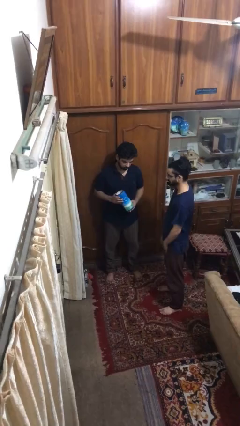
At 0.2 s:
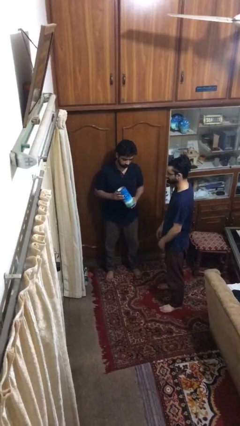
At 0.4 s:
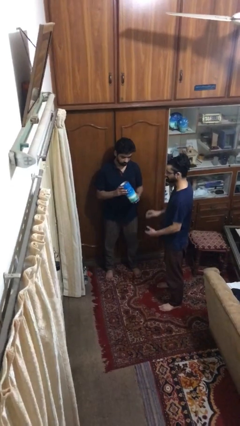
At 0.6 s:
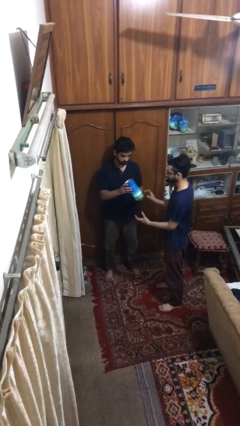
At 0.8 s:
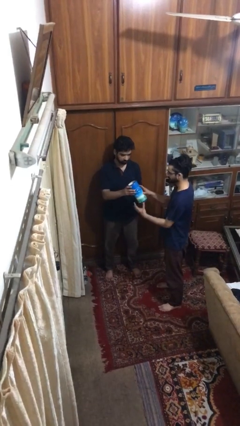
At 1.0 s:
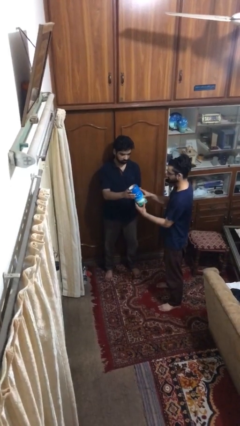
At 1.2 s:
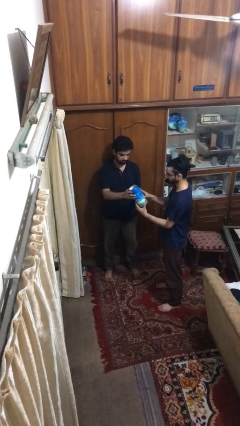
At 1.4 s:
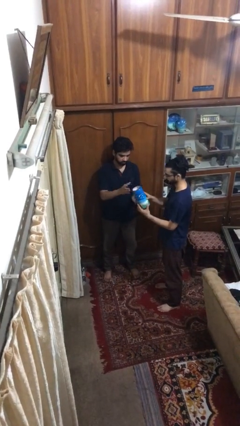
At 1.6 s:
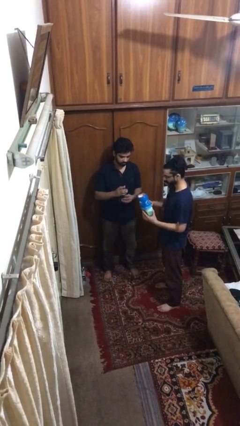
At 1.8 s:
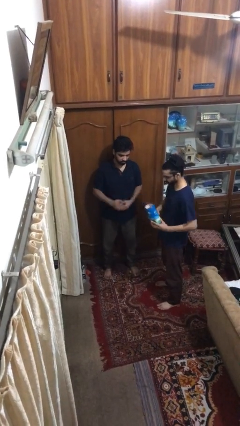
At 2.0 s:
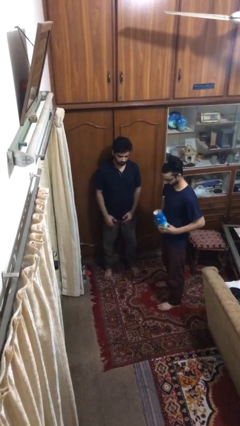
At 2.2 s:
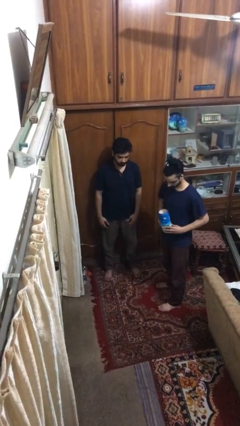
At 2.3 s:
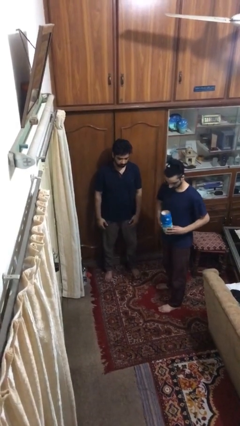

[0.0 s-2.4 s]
person transfers object to person

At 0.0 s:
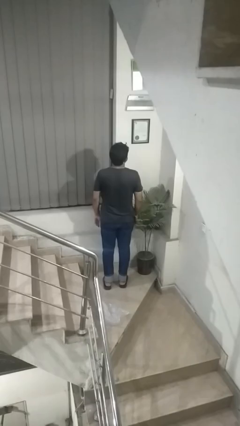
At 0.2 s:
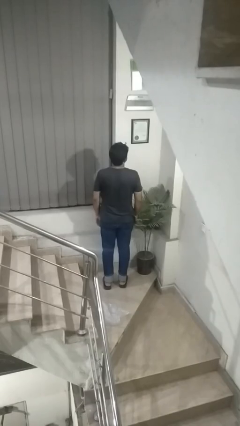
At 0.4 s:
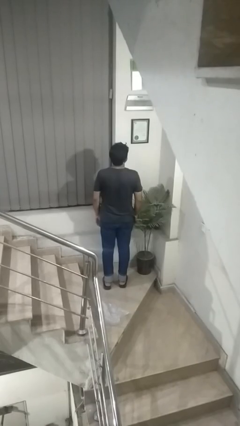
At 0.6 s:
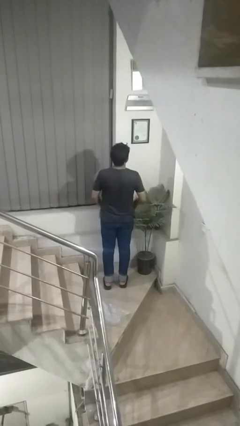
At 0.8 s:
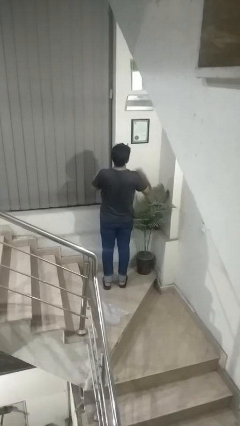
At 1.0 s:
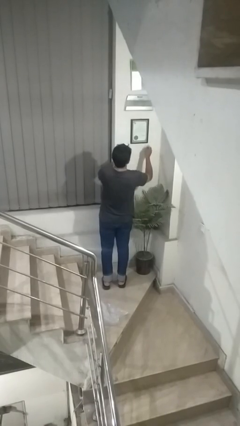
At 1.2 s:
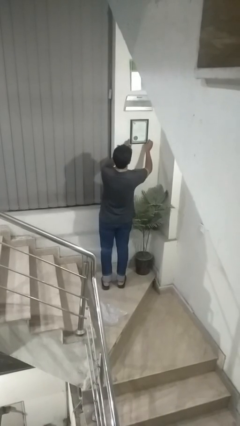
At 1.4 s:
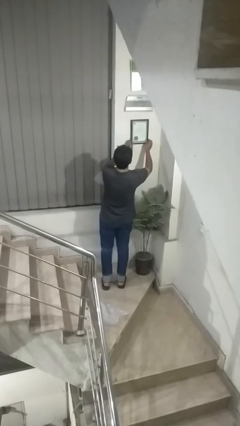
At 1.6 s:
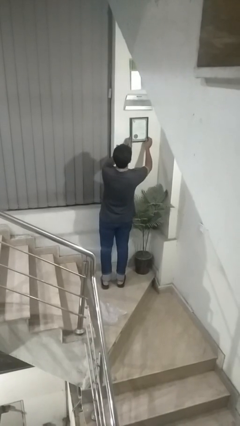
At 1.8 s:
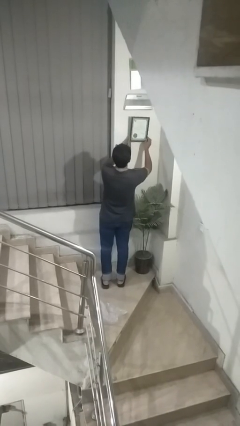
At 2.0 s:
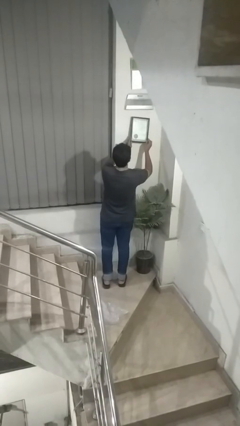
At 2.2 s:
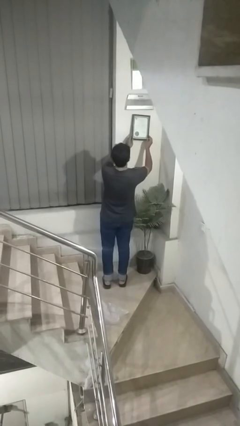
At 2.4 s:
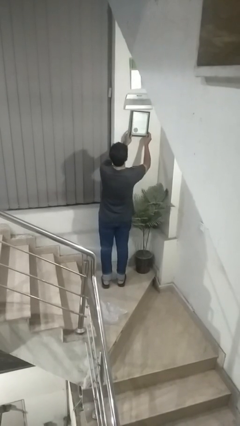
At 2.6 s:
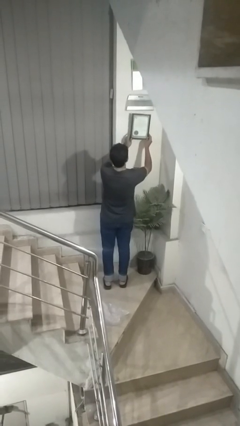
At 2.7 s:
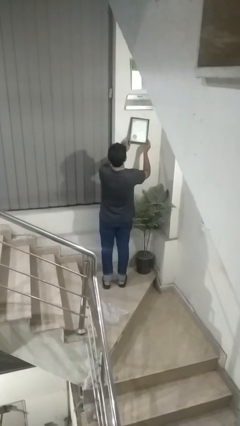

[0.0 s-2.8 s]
person takes down picture frame

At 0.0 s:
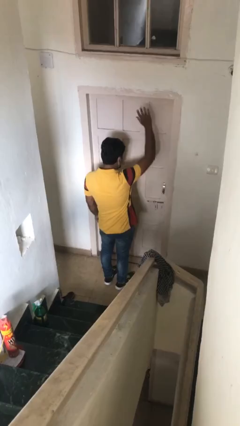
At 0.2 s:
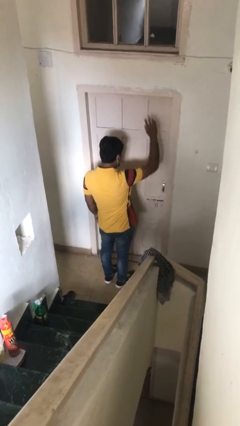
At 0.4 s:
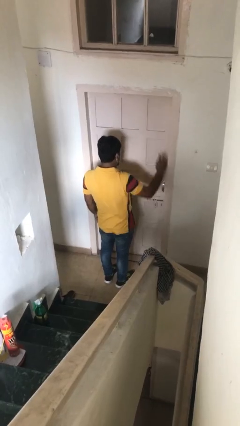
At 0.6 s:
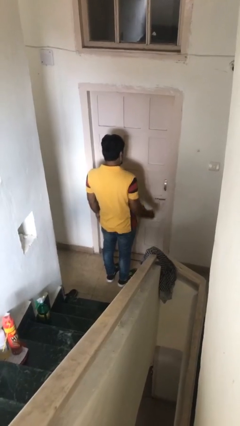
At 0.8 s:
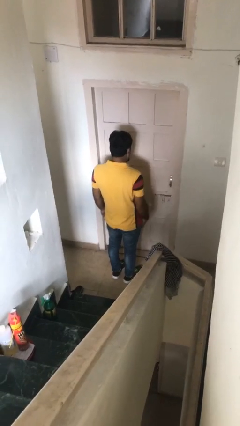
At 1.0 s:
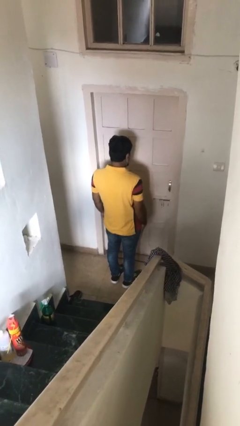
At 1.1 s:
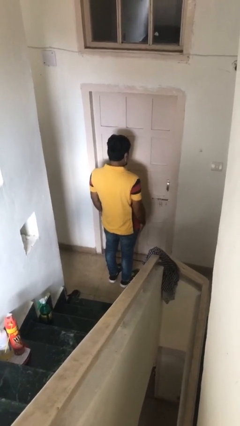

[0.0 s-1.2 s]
person gestures lower hand

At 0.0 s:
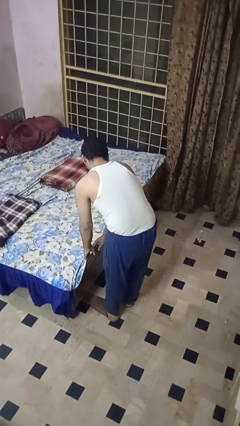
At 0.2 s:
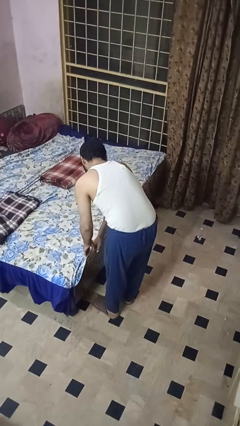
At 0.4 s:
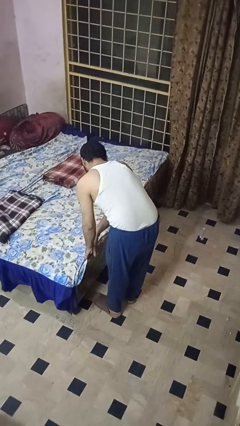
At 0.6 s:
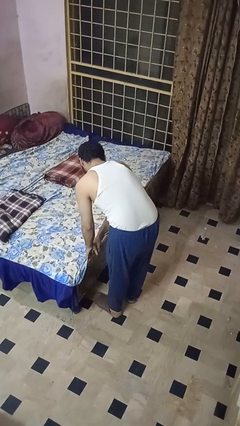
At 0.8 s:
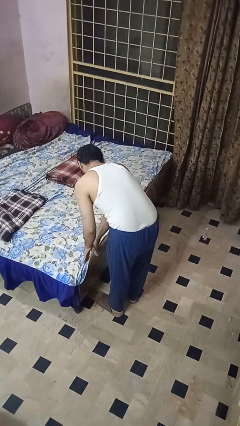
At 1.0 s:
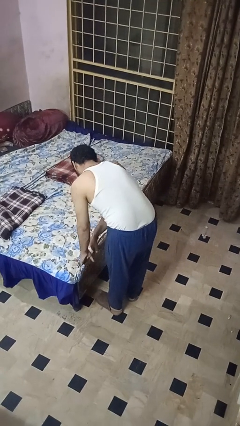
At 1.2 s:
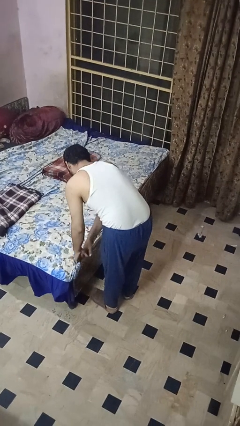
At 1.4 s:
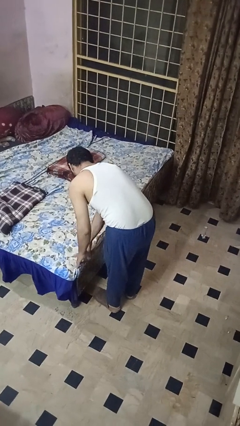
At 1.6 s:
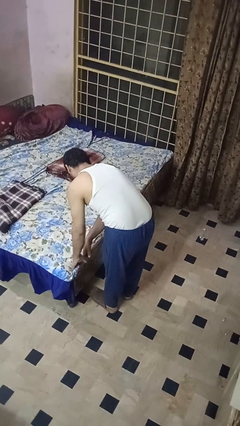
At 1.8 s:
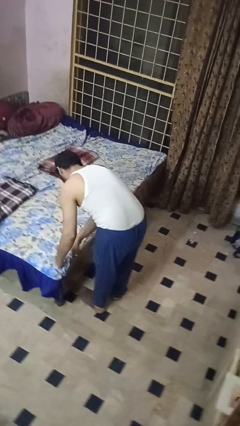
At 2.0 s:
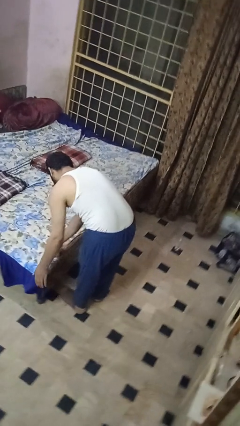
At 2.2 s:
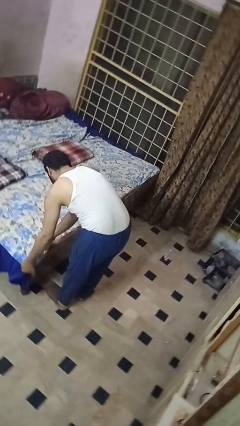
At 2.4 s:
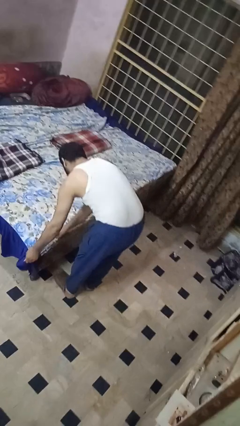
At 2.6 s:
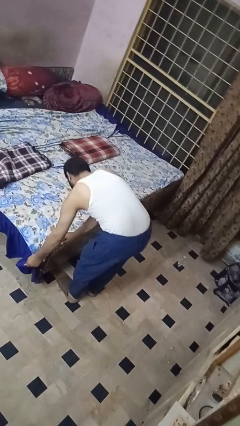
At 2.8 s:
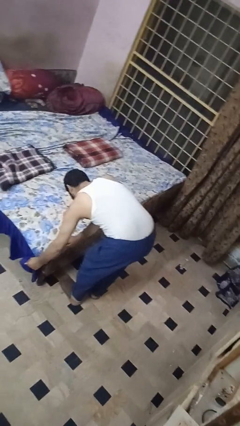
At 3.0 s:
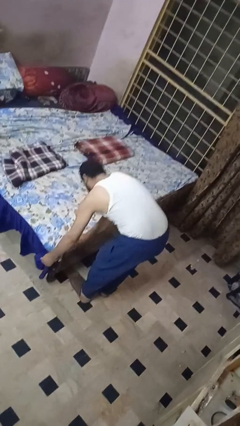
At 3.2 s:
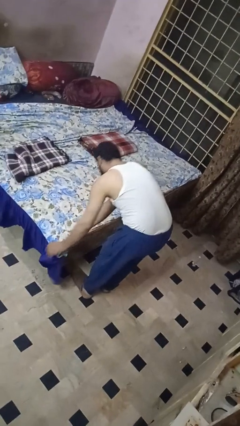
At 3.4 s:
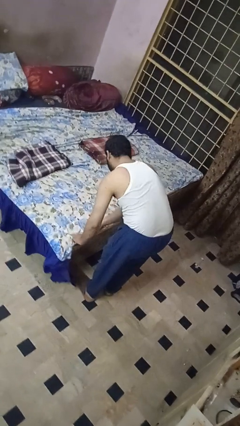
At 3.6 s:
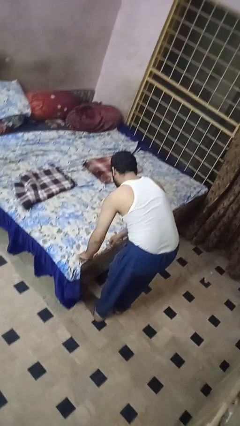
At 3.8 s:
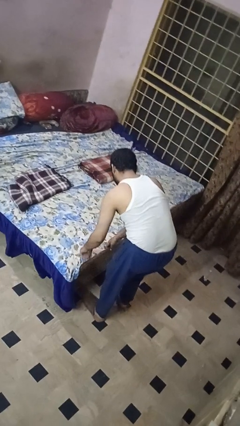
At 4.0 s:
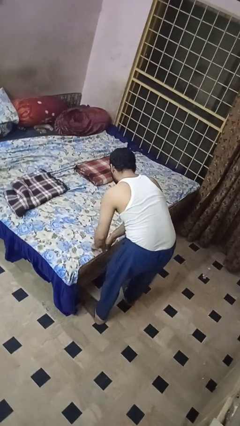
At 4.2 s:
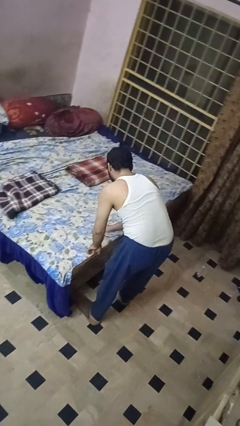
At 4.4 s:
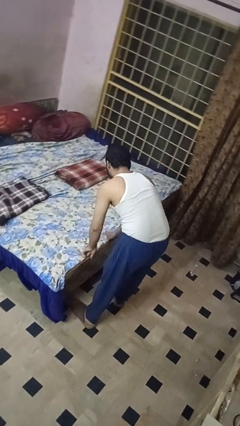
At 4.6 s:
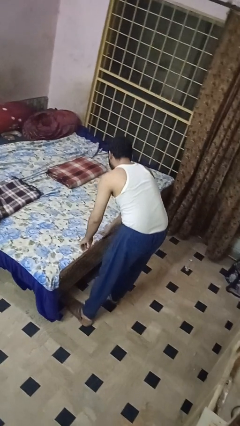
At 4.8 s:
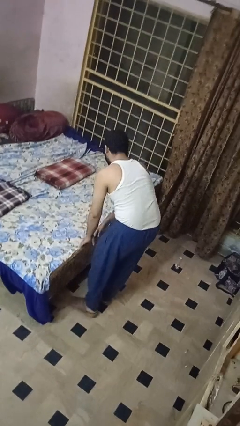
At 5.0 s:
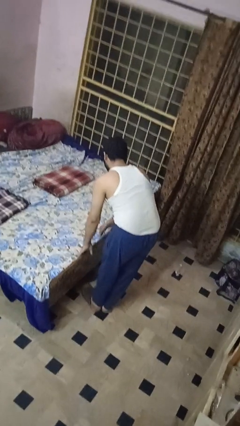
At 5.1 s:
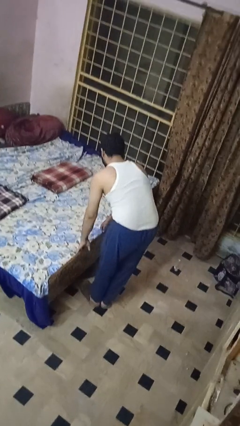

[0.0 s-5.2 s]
person makes bed

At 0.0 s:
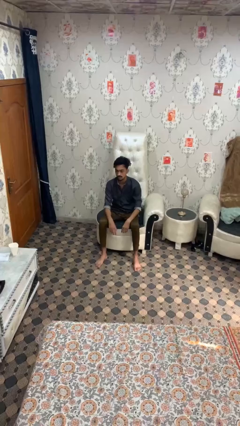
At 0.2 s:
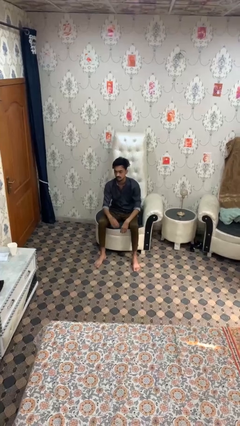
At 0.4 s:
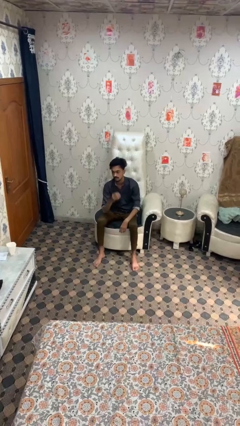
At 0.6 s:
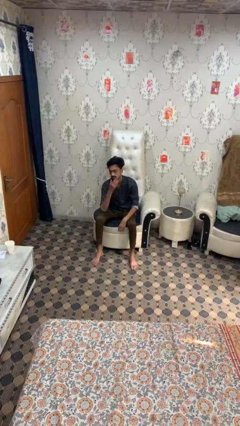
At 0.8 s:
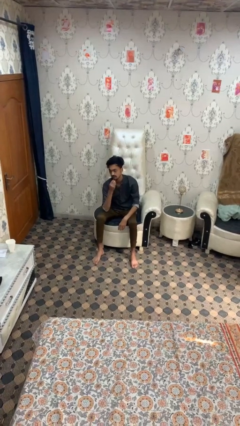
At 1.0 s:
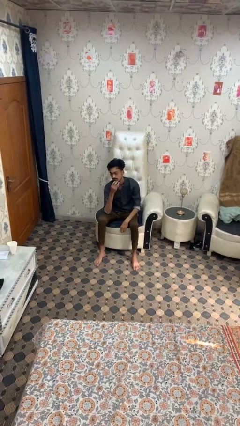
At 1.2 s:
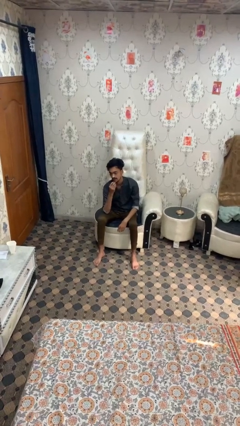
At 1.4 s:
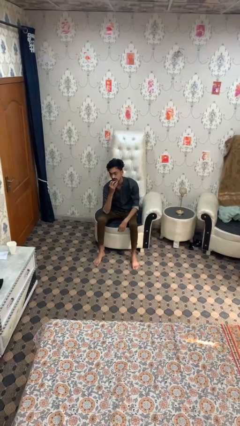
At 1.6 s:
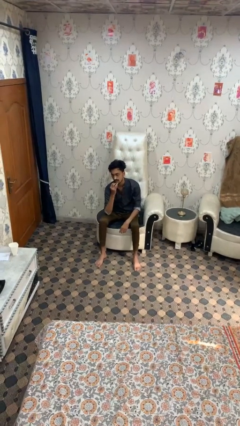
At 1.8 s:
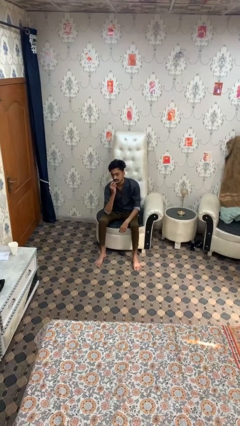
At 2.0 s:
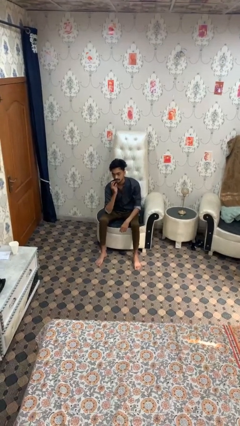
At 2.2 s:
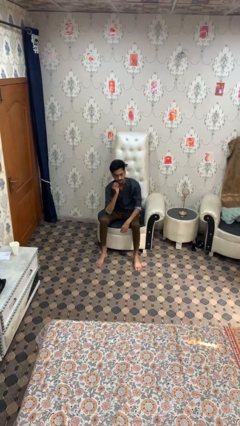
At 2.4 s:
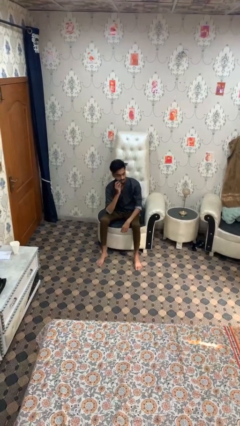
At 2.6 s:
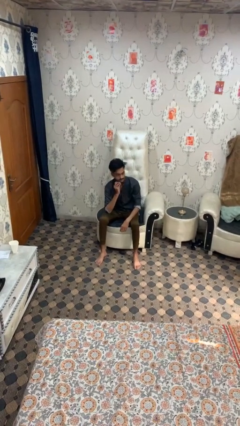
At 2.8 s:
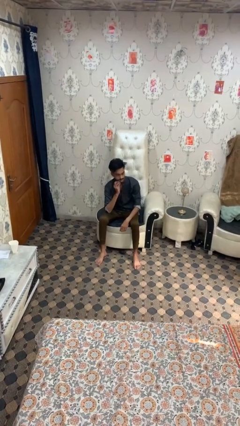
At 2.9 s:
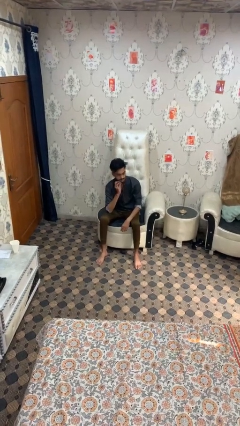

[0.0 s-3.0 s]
person strokes chin

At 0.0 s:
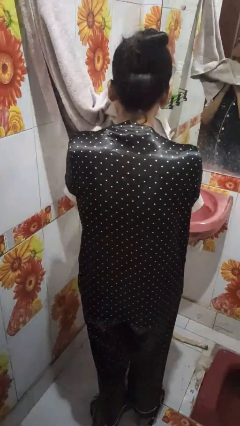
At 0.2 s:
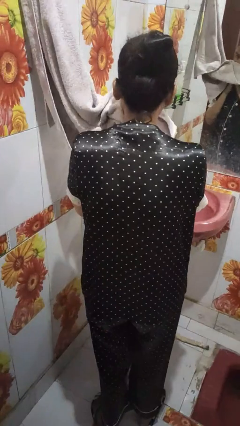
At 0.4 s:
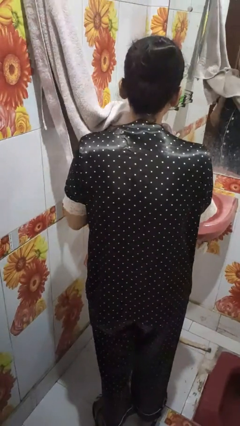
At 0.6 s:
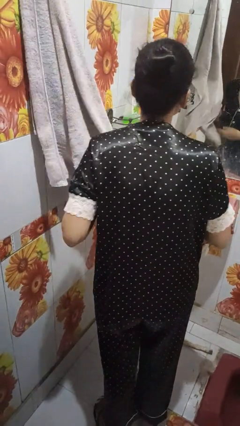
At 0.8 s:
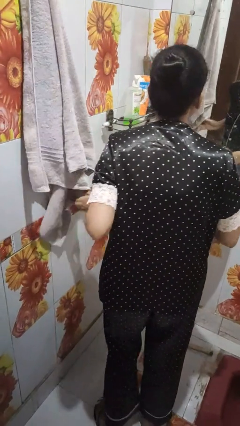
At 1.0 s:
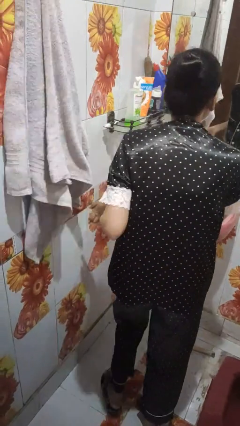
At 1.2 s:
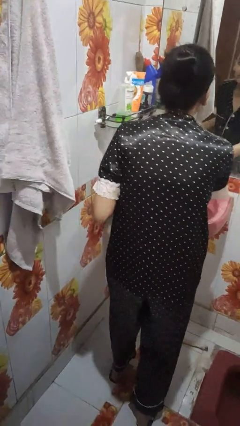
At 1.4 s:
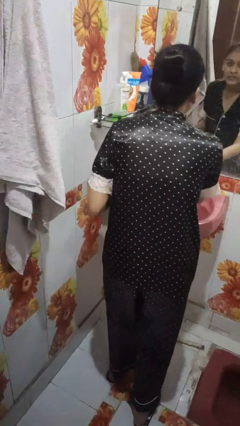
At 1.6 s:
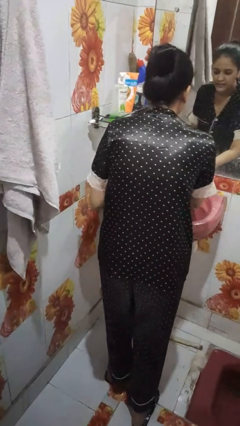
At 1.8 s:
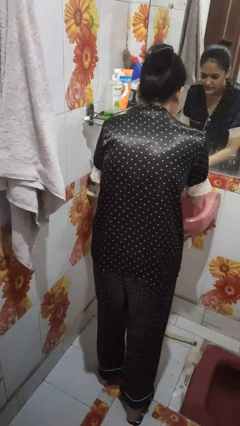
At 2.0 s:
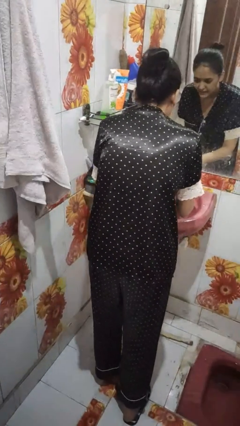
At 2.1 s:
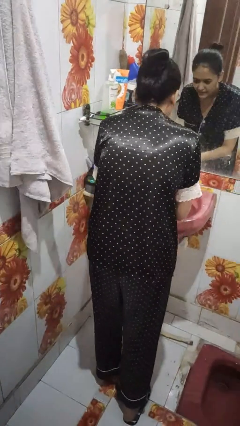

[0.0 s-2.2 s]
person dries face with towel

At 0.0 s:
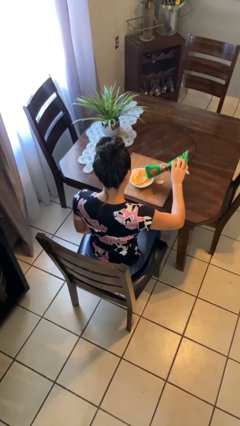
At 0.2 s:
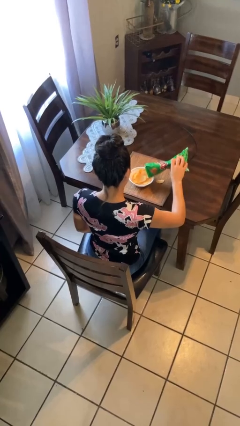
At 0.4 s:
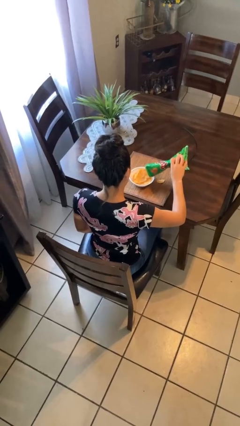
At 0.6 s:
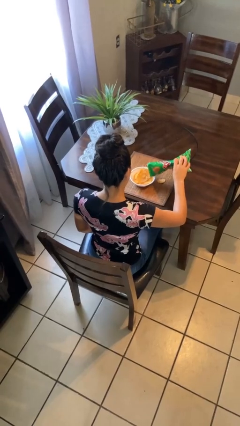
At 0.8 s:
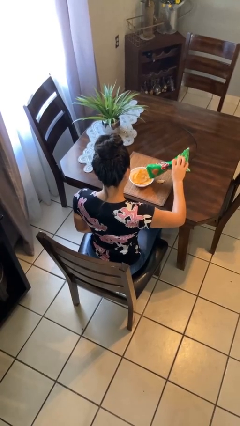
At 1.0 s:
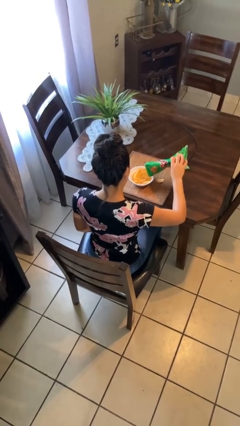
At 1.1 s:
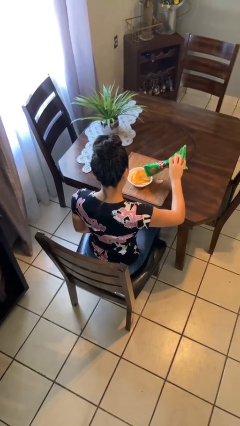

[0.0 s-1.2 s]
person pours into bowl
